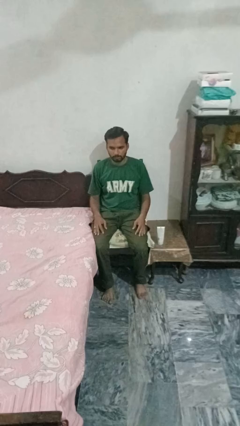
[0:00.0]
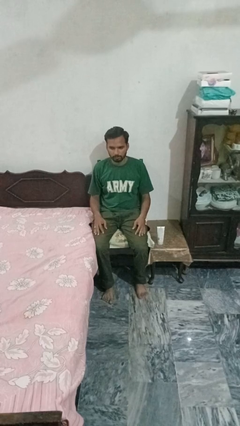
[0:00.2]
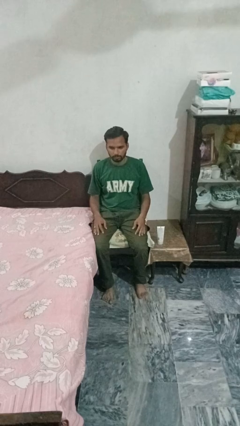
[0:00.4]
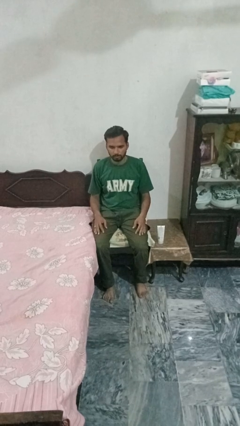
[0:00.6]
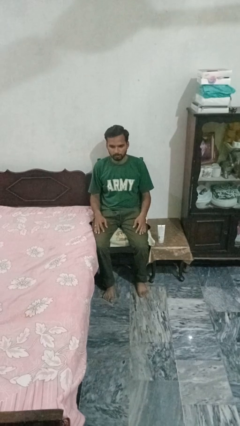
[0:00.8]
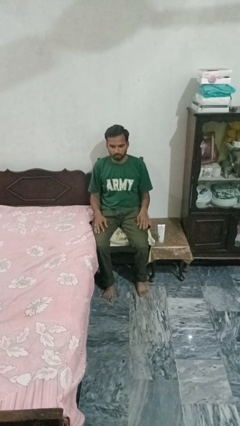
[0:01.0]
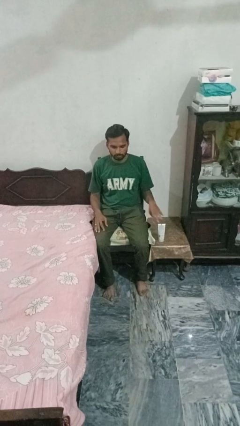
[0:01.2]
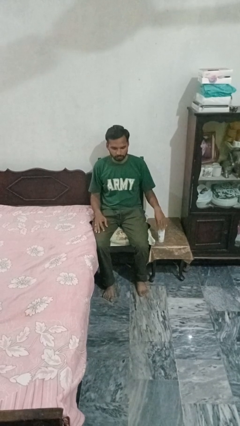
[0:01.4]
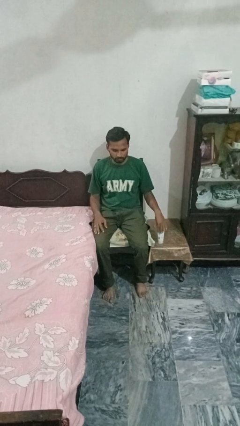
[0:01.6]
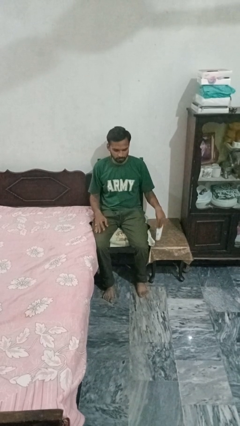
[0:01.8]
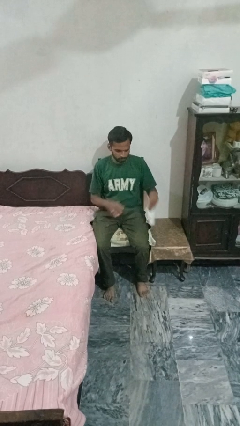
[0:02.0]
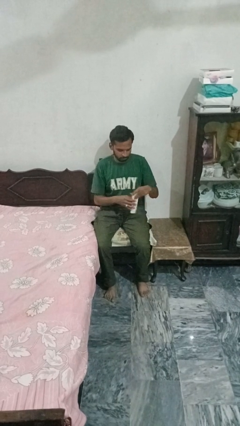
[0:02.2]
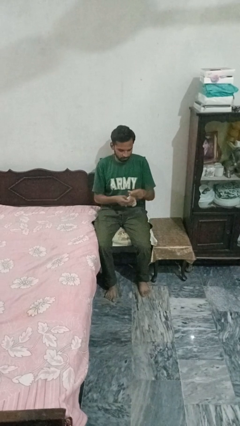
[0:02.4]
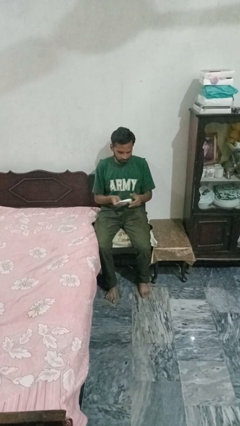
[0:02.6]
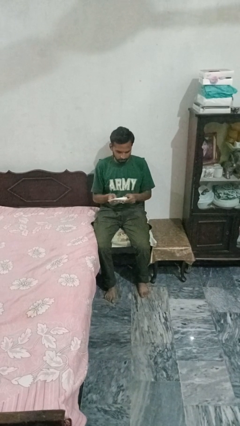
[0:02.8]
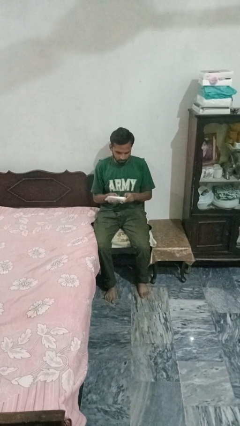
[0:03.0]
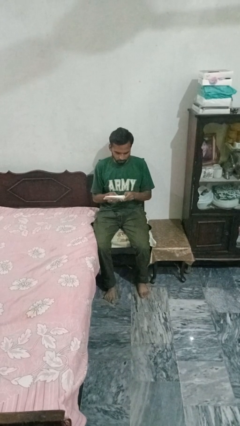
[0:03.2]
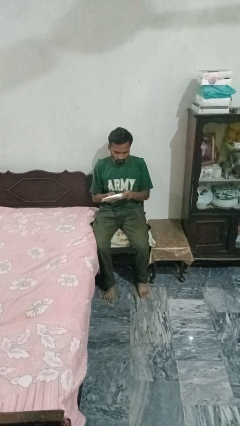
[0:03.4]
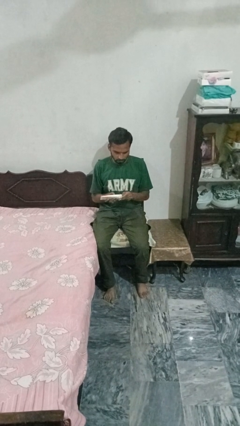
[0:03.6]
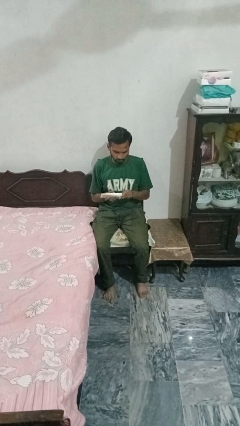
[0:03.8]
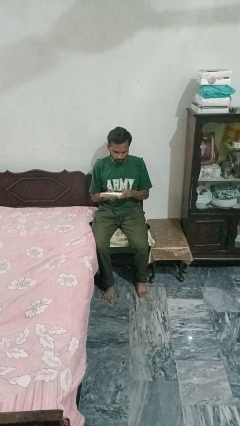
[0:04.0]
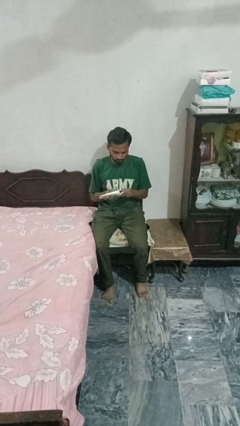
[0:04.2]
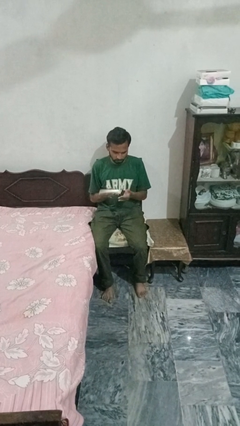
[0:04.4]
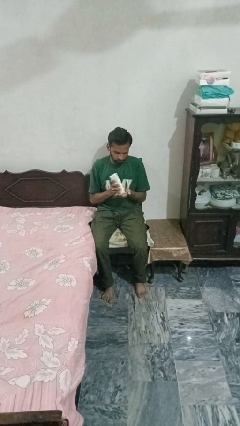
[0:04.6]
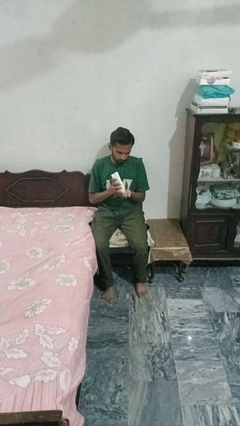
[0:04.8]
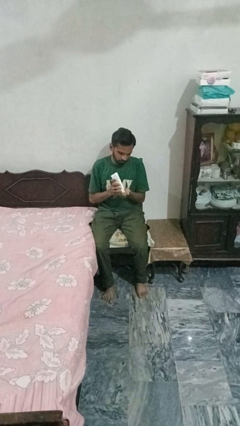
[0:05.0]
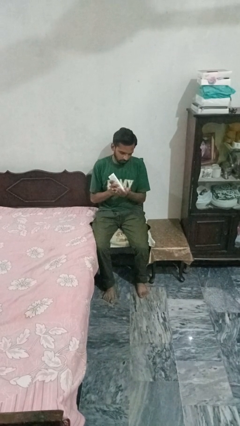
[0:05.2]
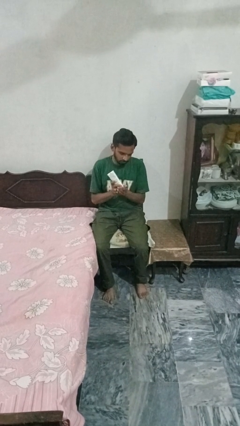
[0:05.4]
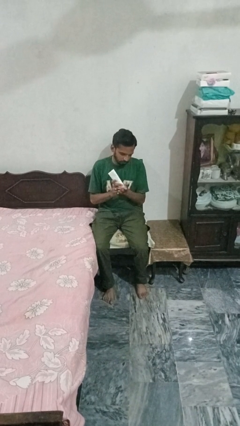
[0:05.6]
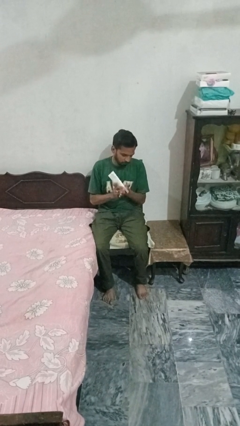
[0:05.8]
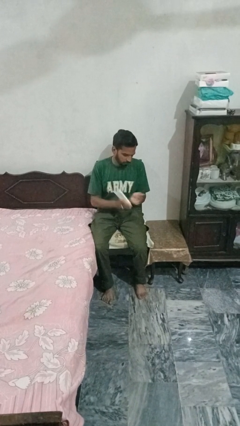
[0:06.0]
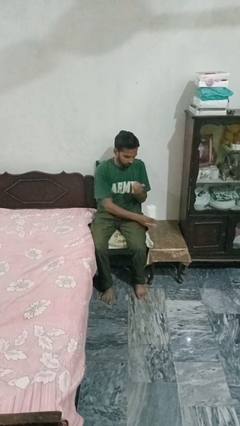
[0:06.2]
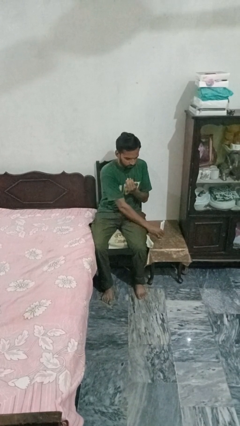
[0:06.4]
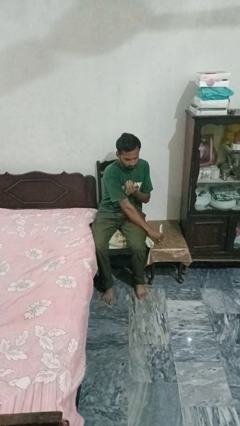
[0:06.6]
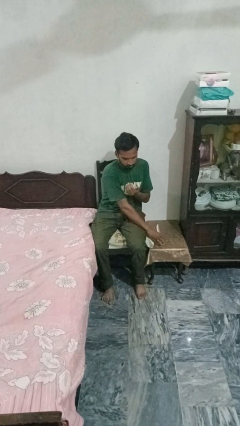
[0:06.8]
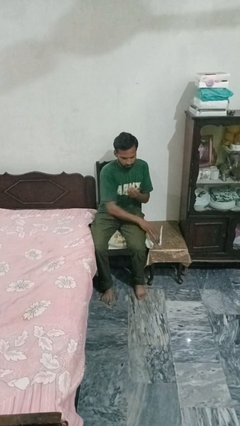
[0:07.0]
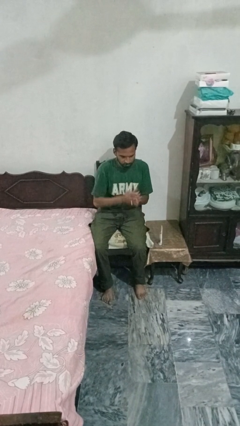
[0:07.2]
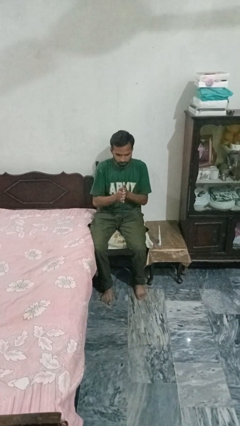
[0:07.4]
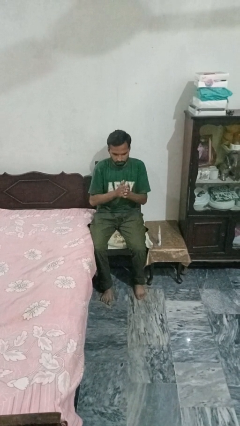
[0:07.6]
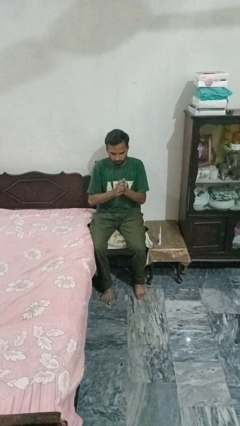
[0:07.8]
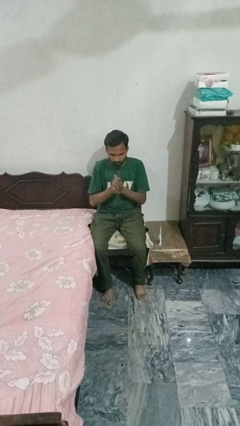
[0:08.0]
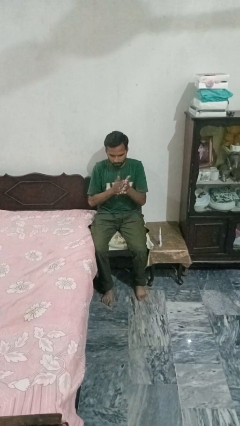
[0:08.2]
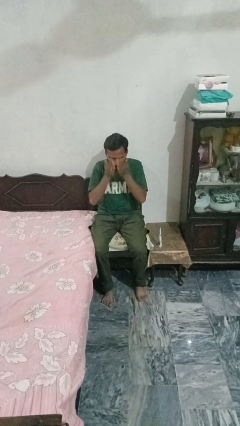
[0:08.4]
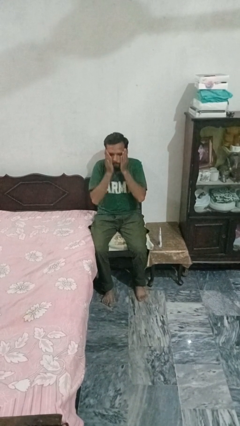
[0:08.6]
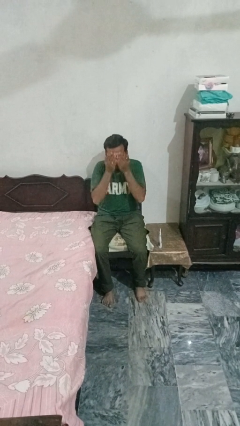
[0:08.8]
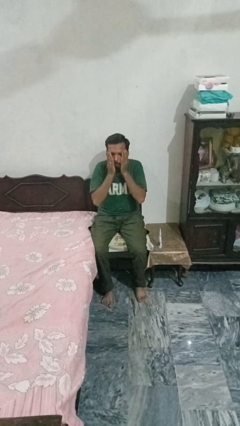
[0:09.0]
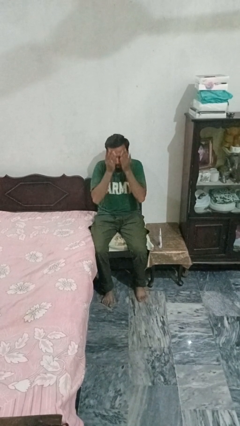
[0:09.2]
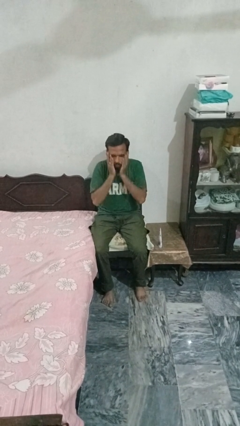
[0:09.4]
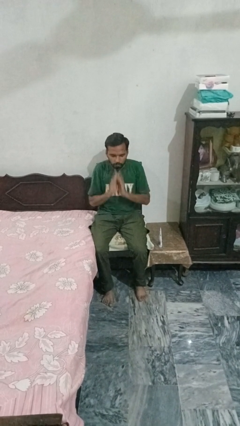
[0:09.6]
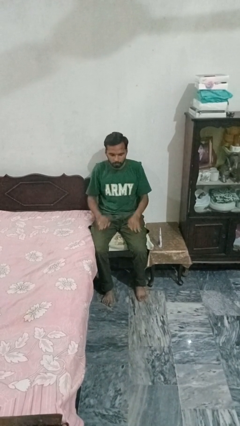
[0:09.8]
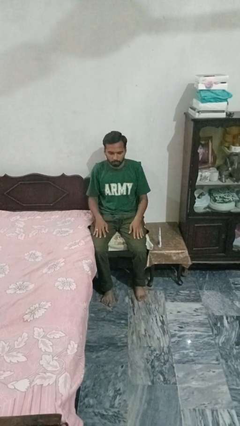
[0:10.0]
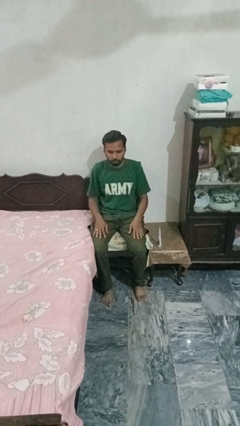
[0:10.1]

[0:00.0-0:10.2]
person applies facial moisturizer

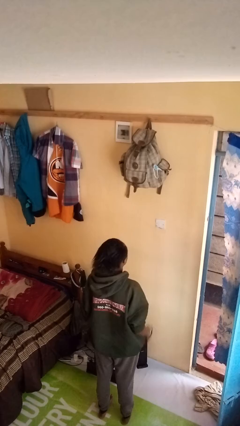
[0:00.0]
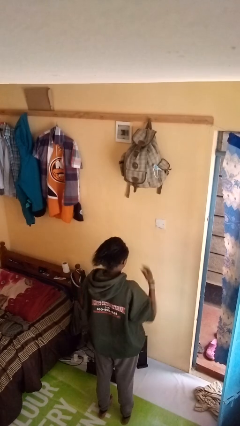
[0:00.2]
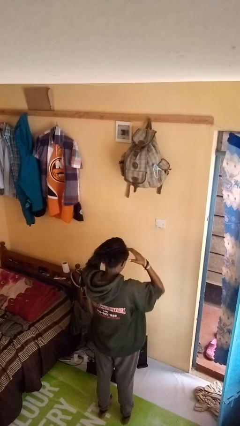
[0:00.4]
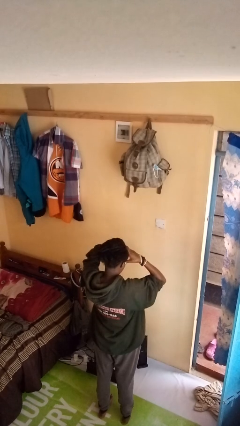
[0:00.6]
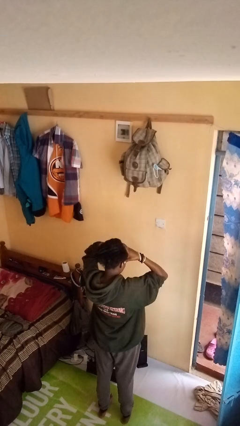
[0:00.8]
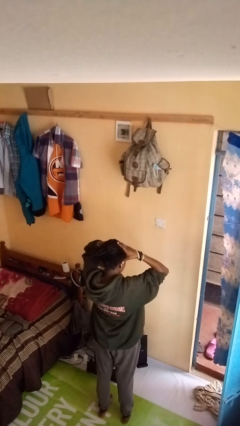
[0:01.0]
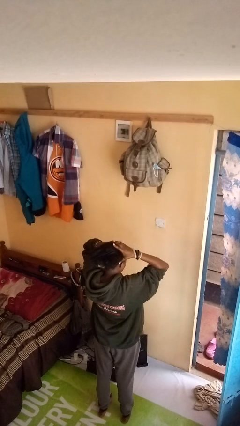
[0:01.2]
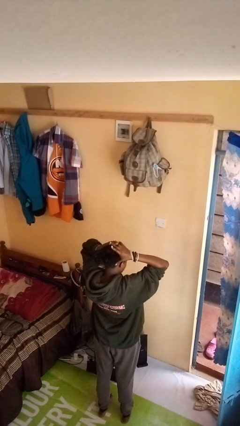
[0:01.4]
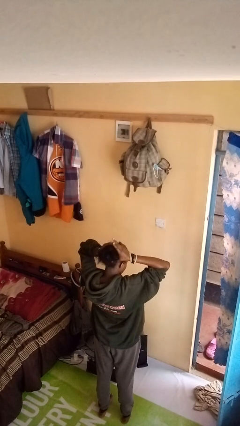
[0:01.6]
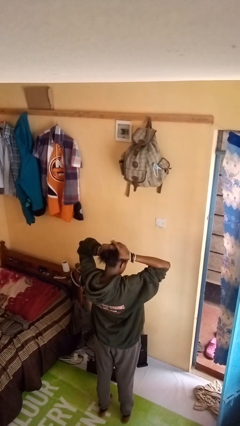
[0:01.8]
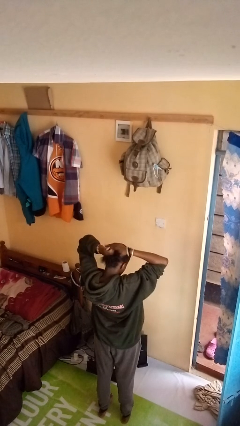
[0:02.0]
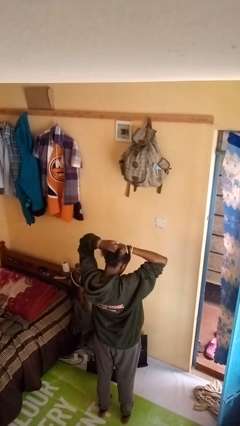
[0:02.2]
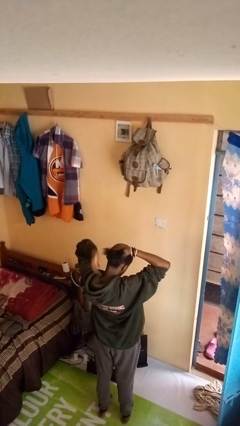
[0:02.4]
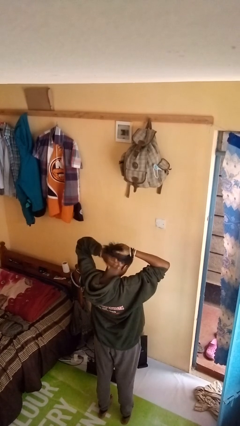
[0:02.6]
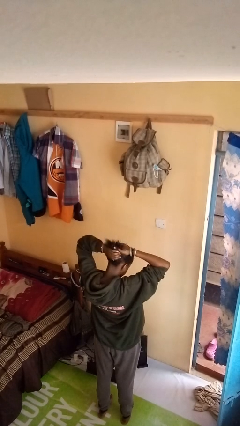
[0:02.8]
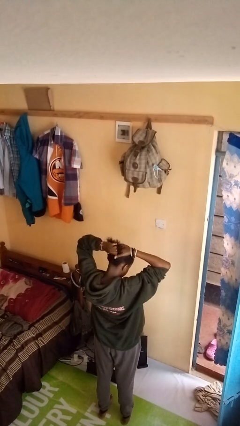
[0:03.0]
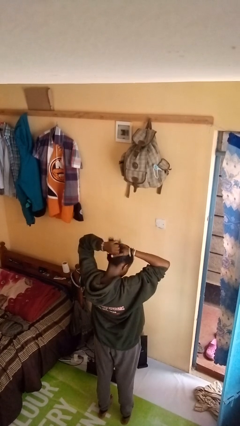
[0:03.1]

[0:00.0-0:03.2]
person strokes hair

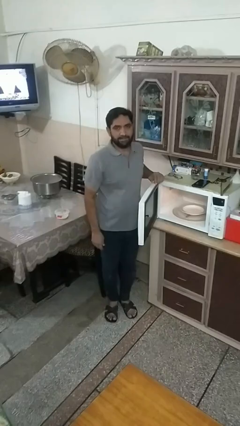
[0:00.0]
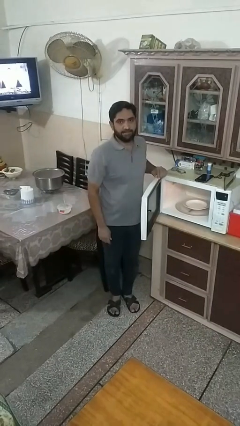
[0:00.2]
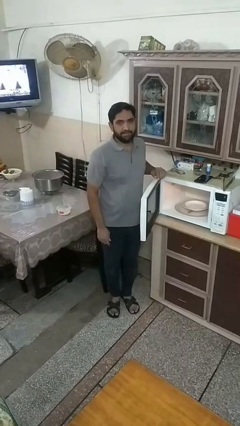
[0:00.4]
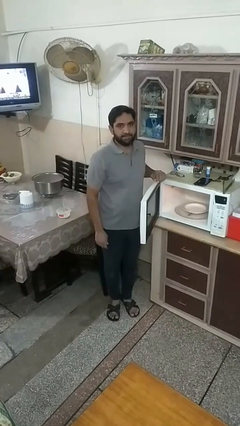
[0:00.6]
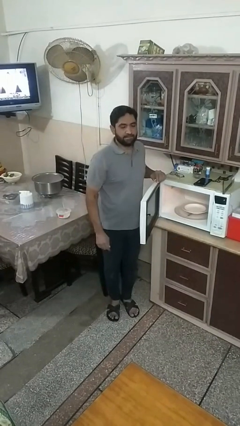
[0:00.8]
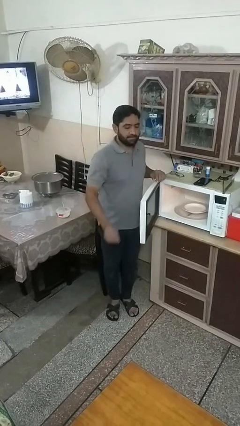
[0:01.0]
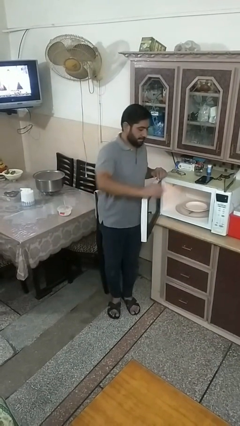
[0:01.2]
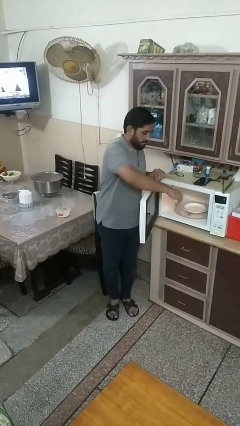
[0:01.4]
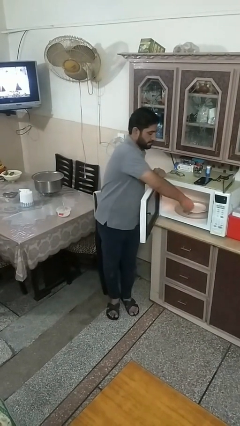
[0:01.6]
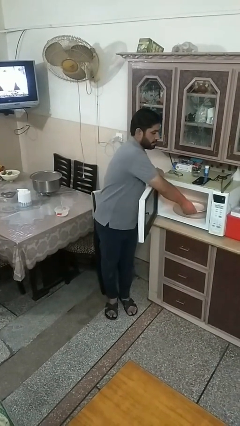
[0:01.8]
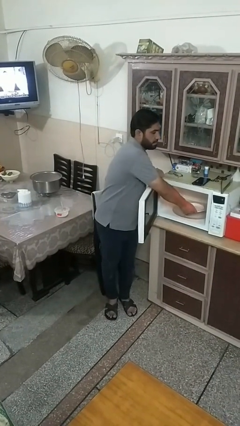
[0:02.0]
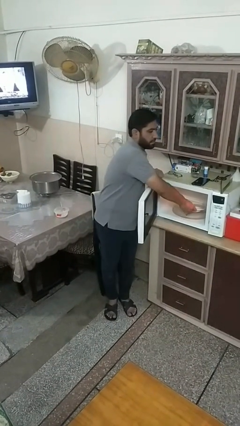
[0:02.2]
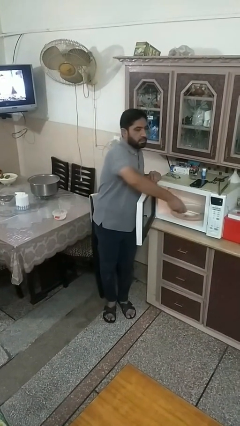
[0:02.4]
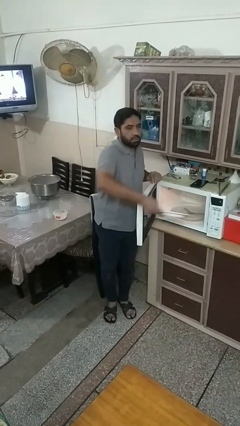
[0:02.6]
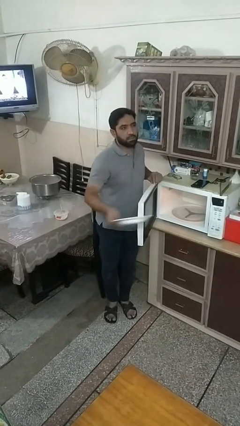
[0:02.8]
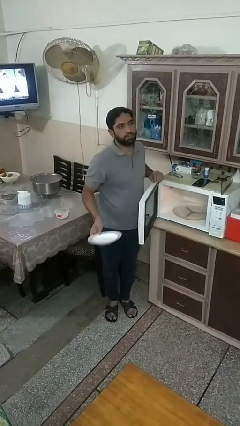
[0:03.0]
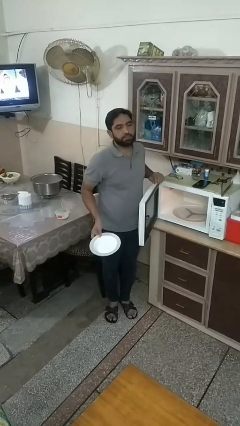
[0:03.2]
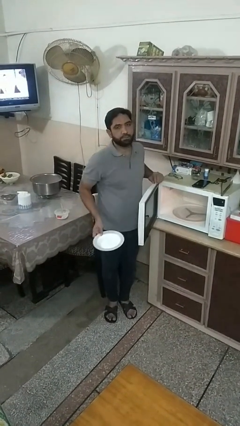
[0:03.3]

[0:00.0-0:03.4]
person takes object from microwave

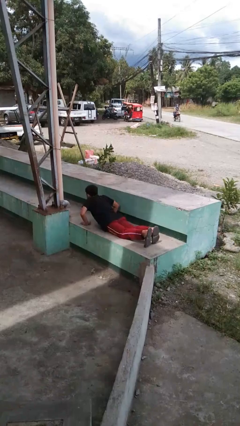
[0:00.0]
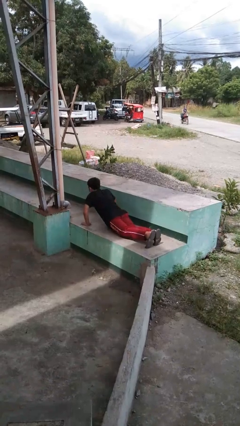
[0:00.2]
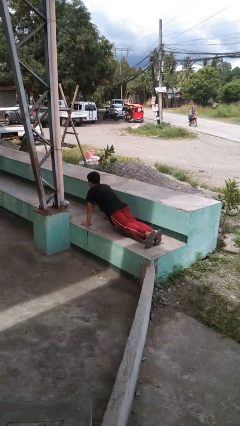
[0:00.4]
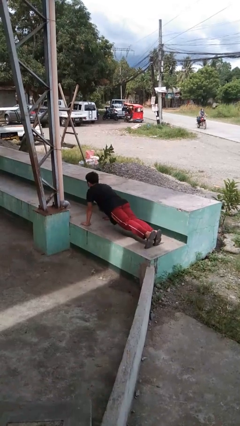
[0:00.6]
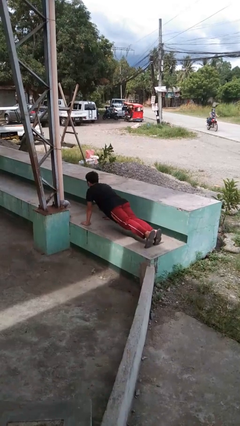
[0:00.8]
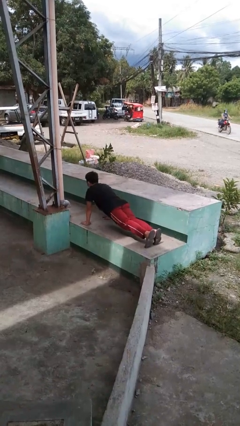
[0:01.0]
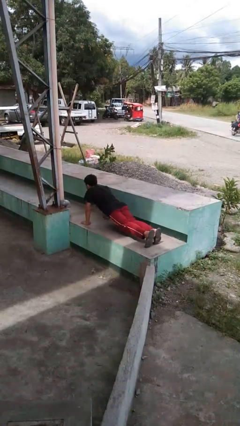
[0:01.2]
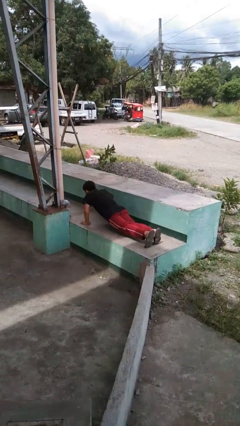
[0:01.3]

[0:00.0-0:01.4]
person exercises with pushup
